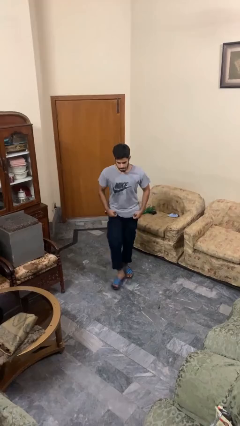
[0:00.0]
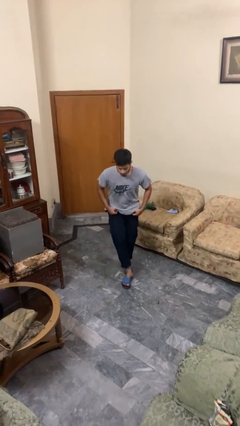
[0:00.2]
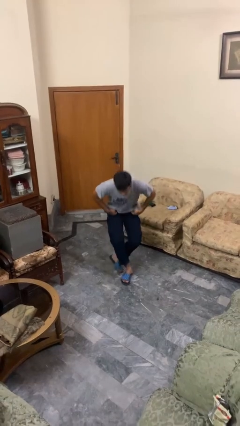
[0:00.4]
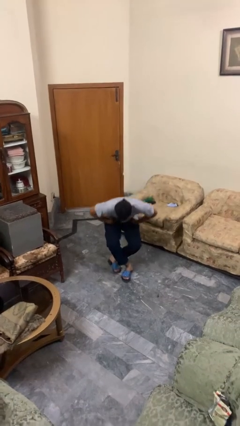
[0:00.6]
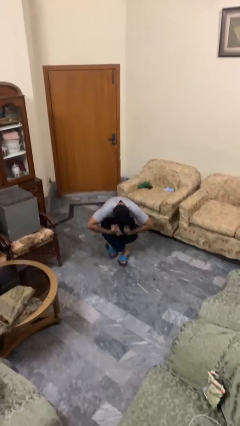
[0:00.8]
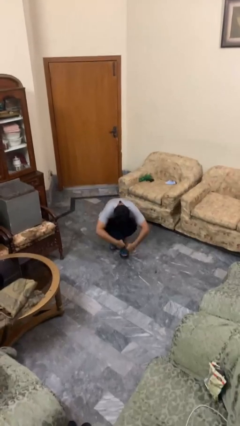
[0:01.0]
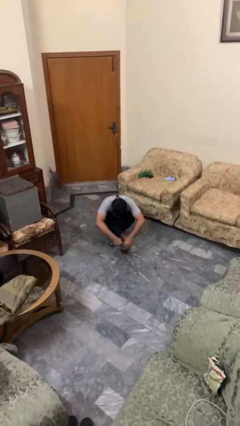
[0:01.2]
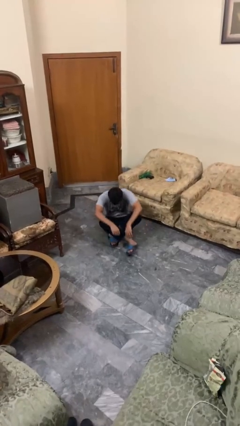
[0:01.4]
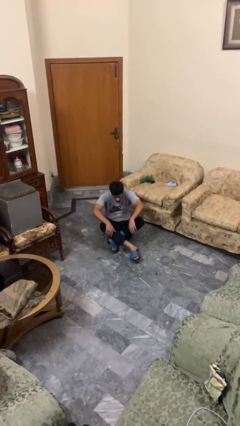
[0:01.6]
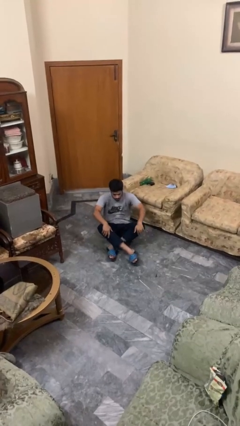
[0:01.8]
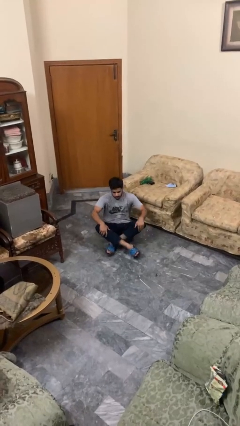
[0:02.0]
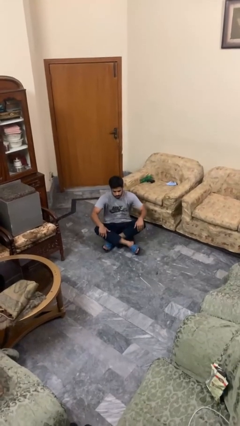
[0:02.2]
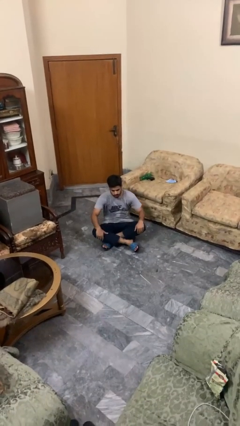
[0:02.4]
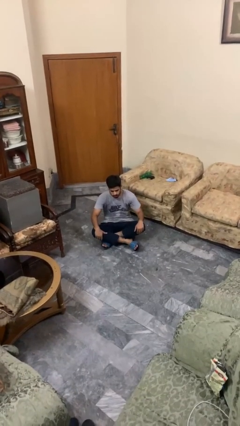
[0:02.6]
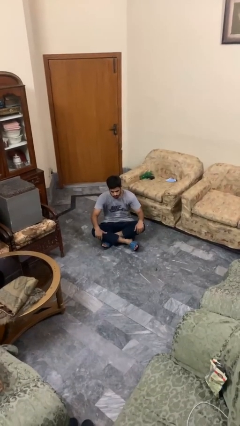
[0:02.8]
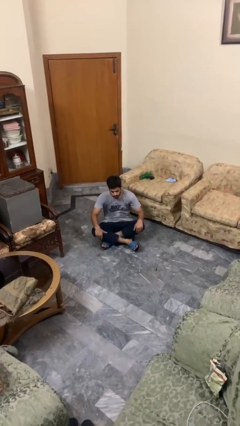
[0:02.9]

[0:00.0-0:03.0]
person sits crisscross

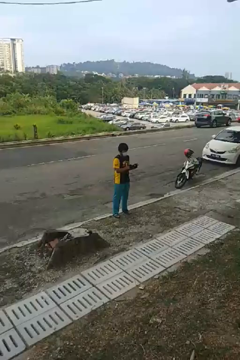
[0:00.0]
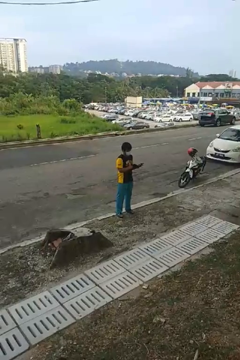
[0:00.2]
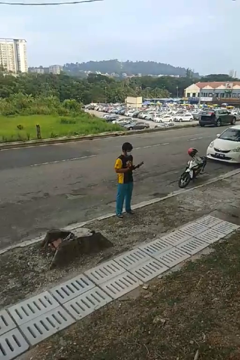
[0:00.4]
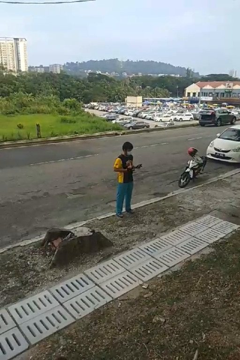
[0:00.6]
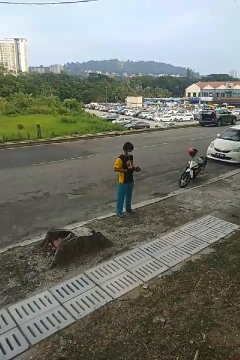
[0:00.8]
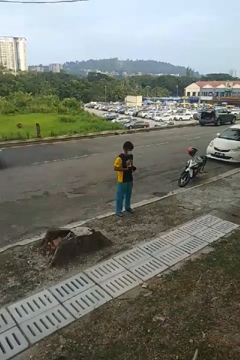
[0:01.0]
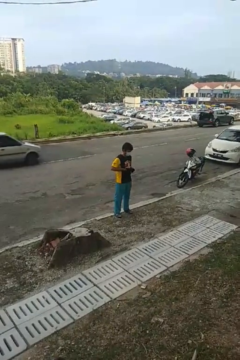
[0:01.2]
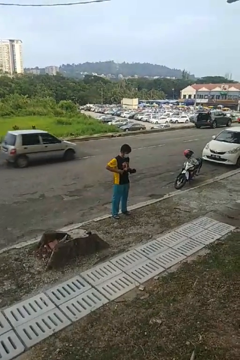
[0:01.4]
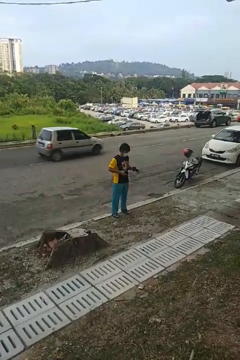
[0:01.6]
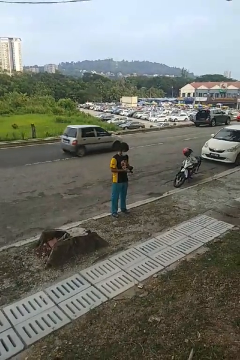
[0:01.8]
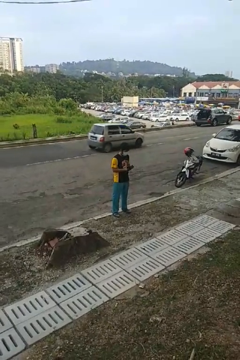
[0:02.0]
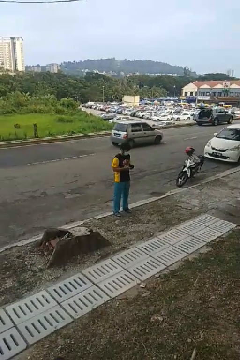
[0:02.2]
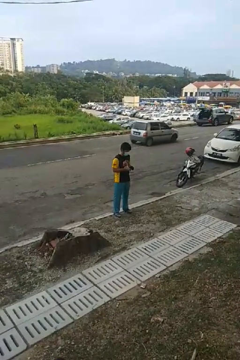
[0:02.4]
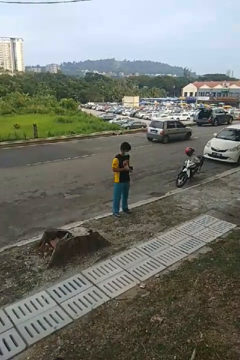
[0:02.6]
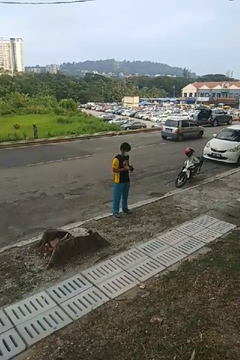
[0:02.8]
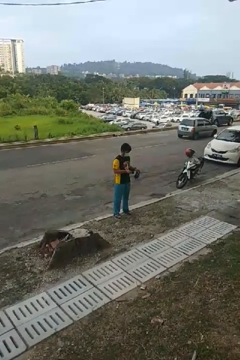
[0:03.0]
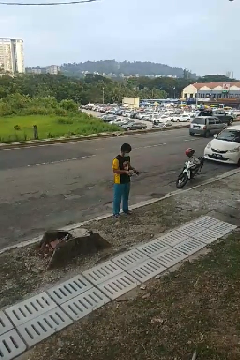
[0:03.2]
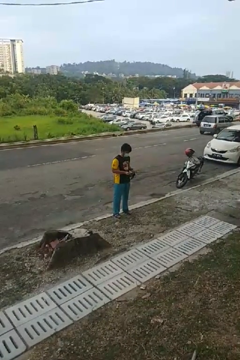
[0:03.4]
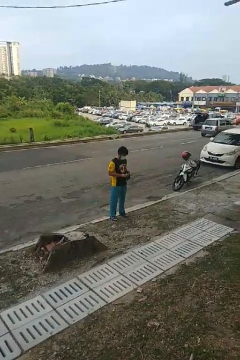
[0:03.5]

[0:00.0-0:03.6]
person takes off gloves

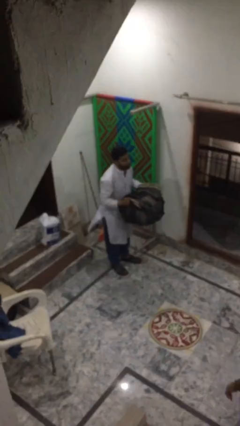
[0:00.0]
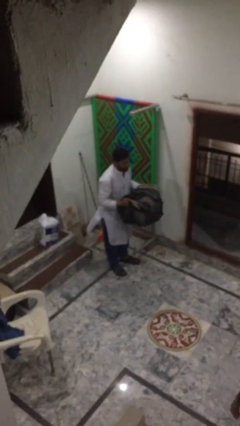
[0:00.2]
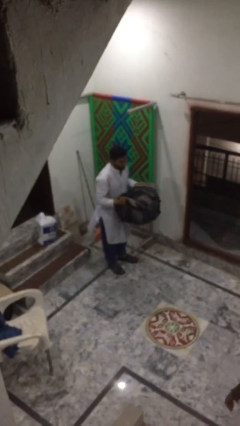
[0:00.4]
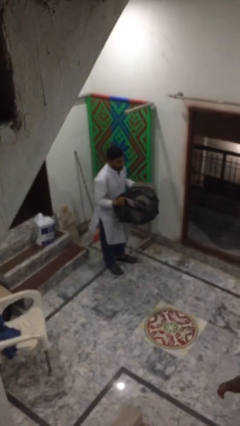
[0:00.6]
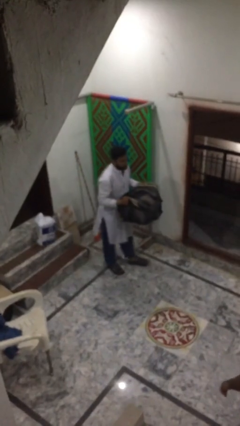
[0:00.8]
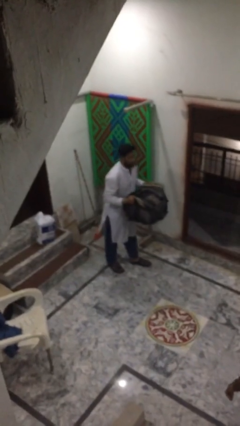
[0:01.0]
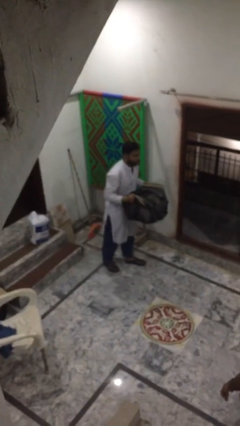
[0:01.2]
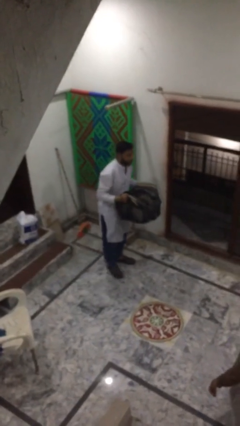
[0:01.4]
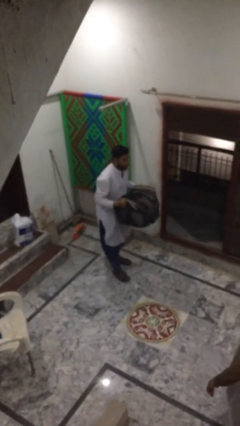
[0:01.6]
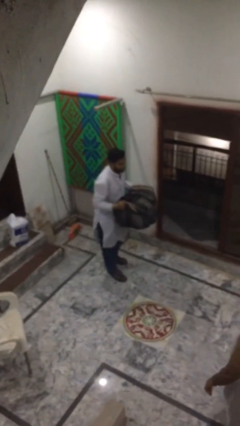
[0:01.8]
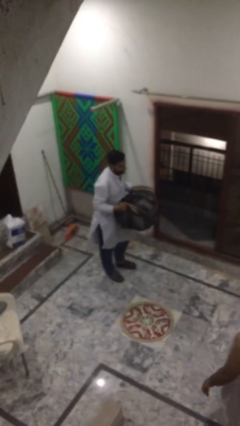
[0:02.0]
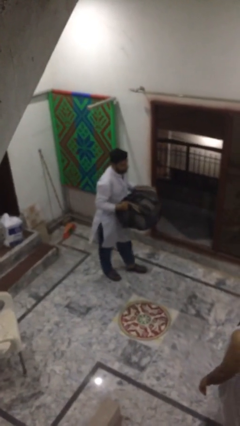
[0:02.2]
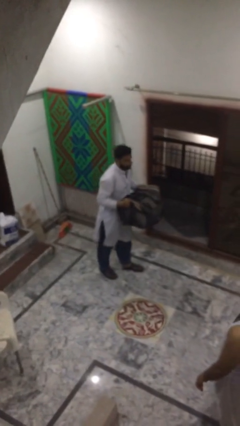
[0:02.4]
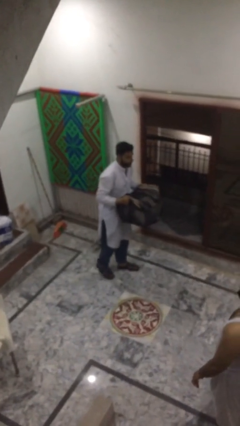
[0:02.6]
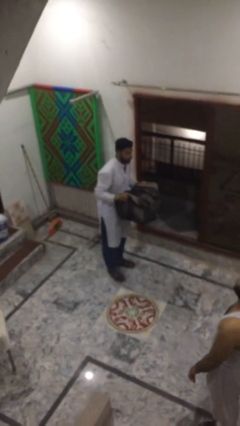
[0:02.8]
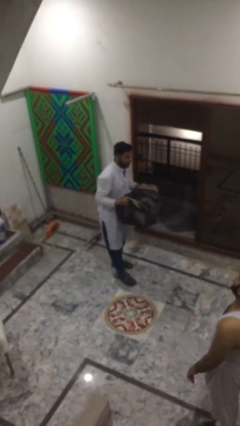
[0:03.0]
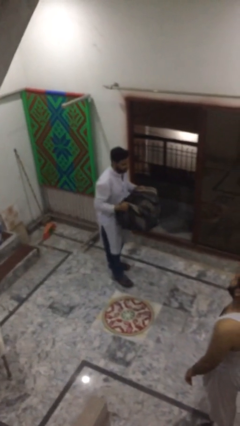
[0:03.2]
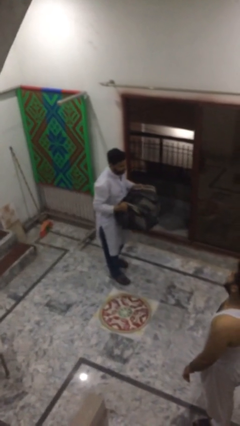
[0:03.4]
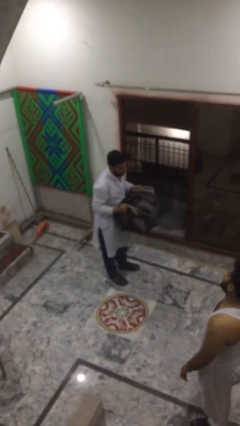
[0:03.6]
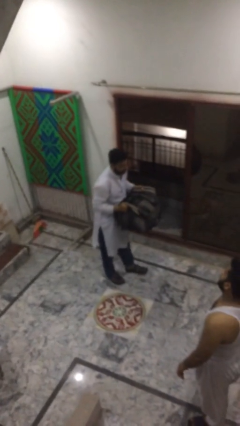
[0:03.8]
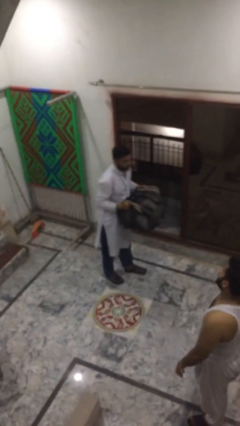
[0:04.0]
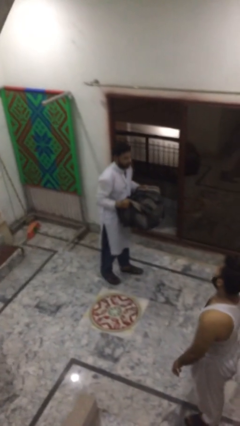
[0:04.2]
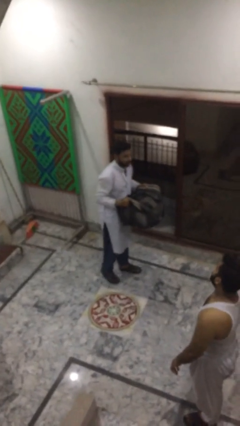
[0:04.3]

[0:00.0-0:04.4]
person carries heavy object

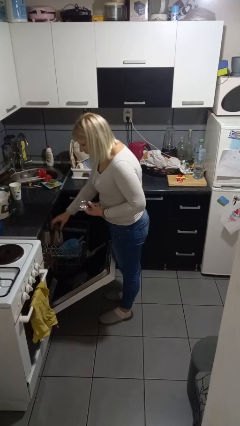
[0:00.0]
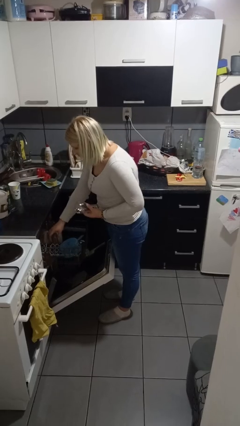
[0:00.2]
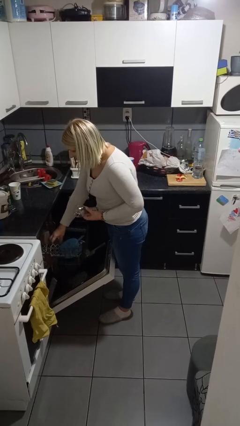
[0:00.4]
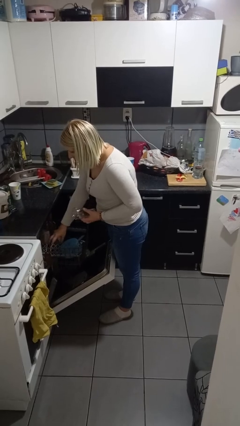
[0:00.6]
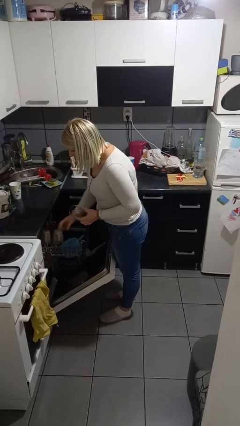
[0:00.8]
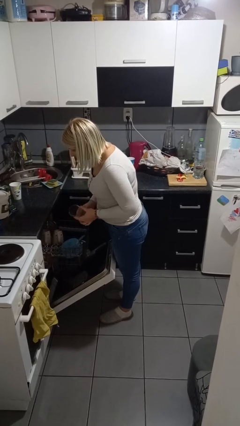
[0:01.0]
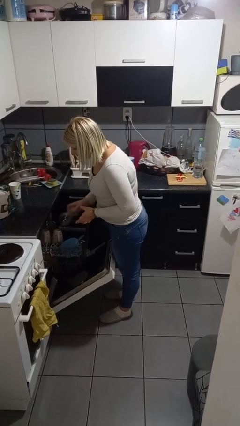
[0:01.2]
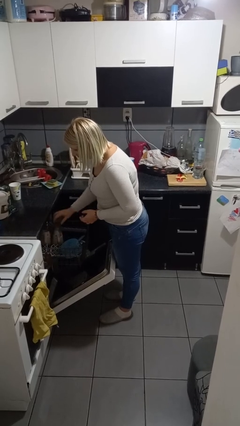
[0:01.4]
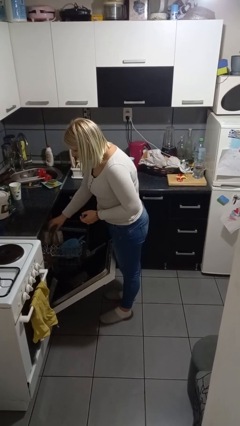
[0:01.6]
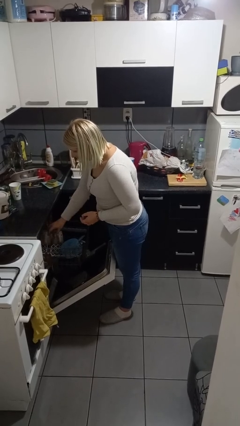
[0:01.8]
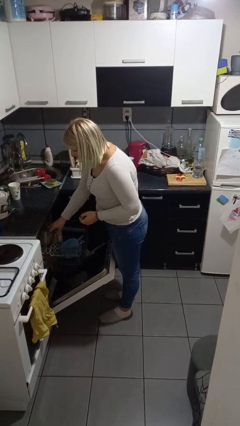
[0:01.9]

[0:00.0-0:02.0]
person loads dishwasher

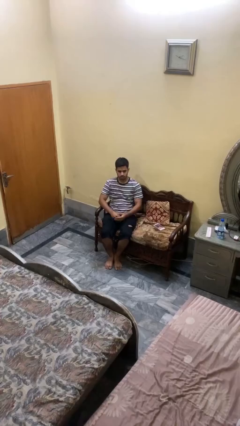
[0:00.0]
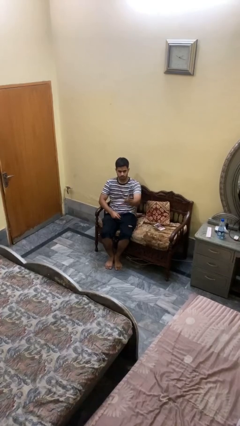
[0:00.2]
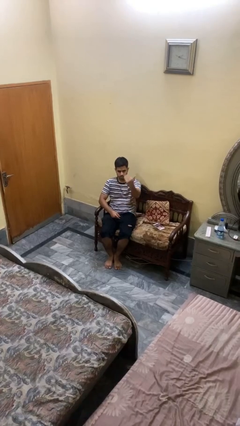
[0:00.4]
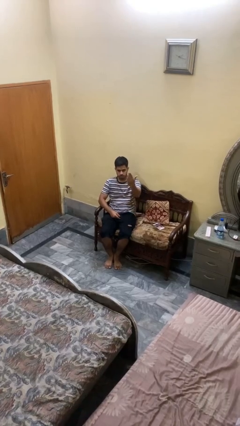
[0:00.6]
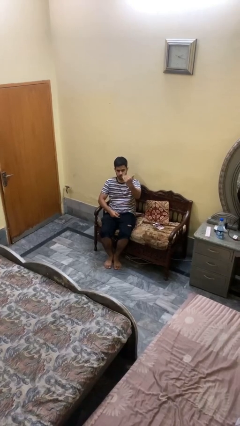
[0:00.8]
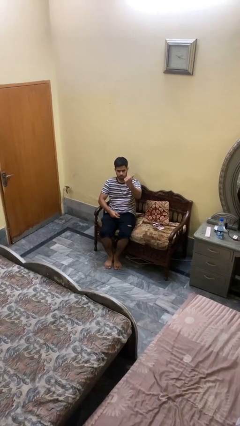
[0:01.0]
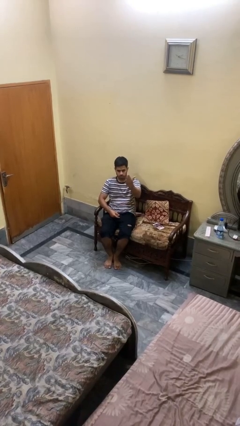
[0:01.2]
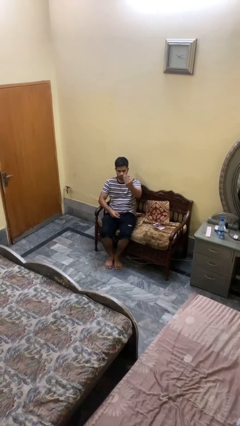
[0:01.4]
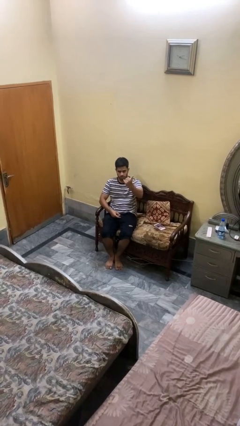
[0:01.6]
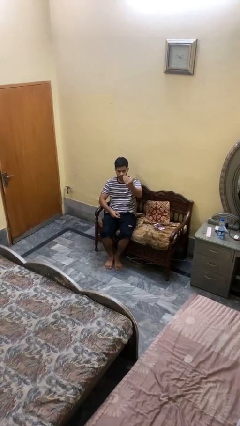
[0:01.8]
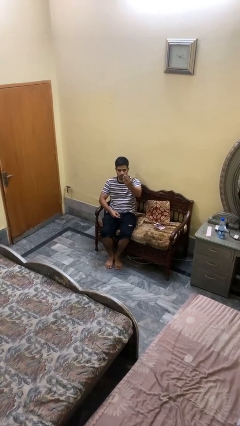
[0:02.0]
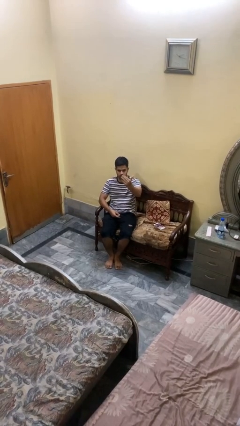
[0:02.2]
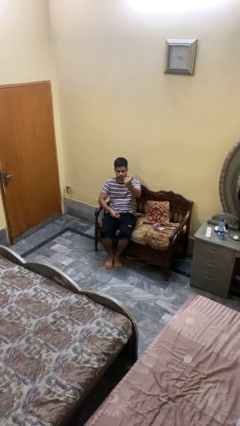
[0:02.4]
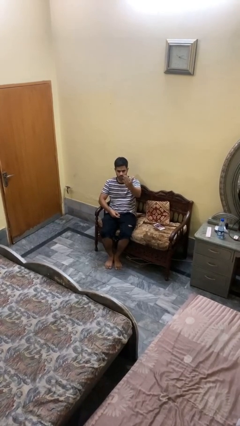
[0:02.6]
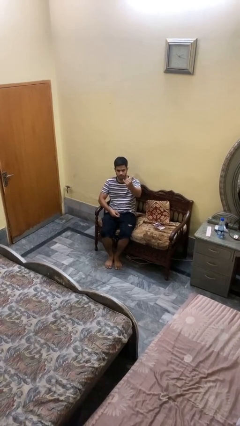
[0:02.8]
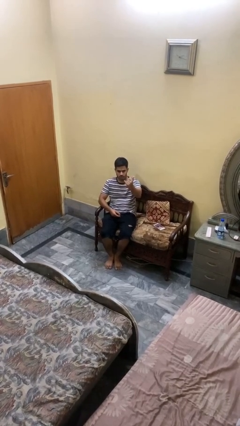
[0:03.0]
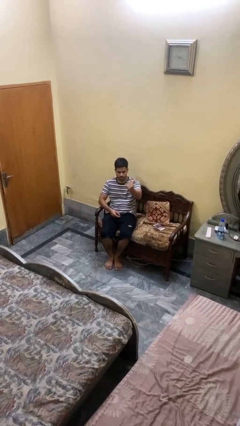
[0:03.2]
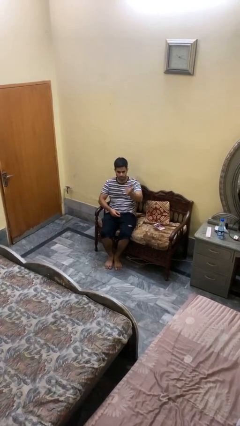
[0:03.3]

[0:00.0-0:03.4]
person gestures come here

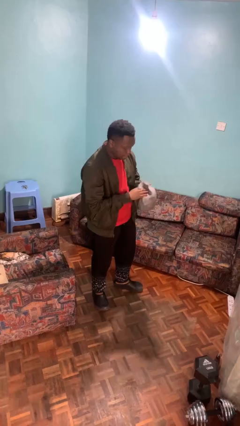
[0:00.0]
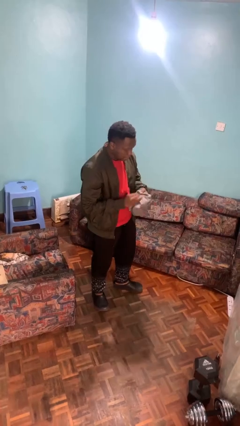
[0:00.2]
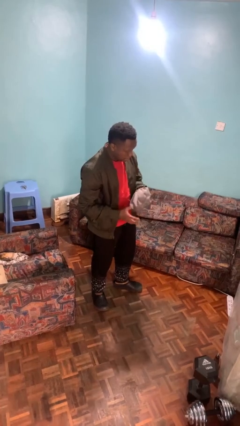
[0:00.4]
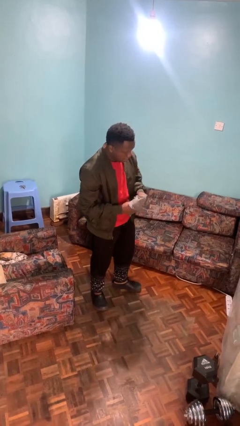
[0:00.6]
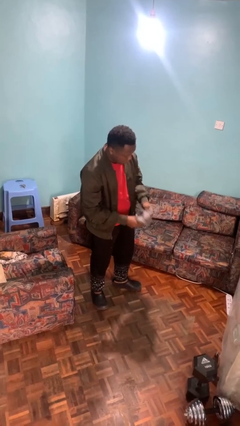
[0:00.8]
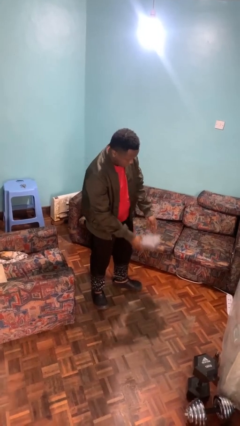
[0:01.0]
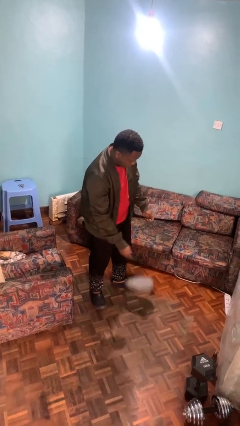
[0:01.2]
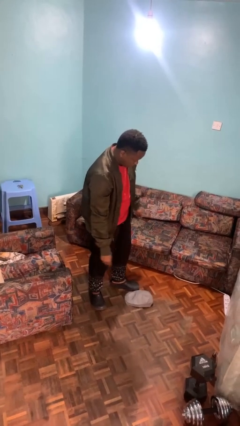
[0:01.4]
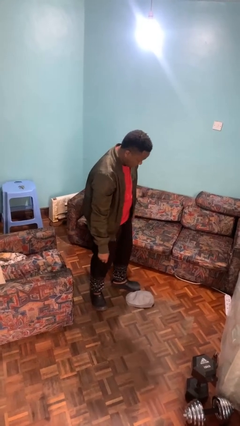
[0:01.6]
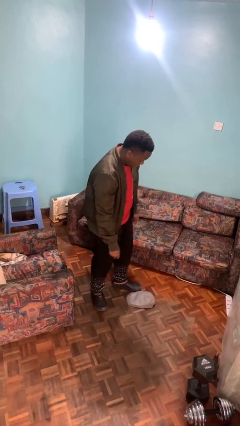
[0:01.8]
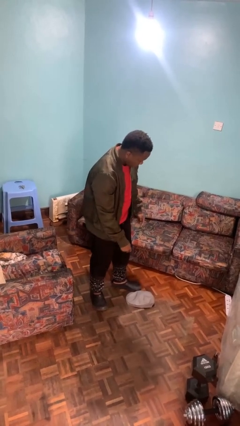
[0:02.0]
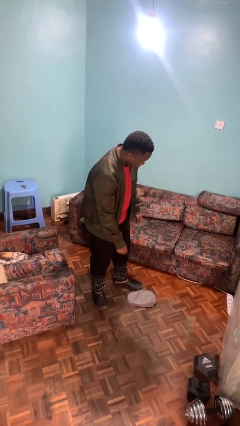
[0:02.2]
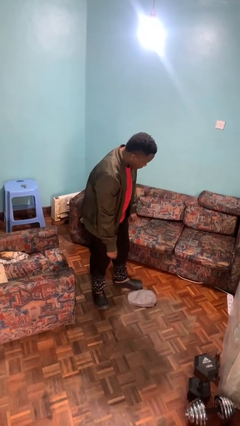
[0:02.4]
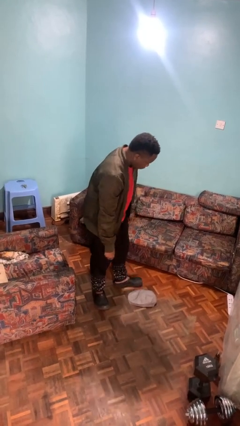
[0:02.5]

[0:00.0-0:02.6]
person drops object
